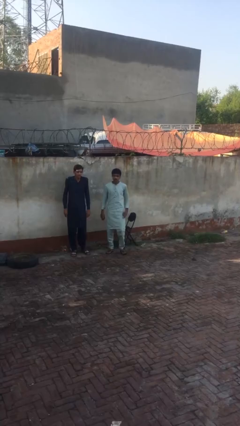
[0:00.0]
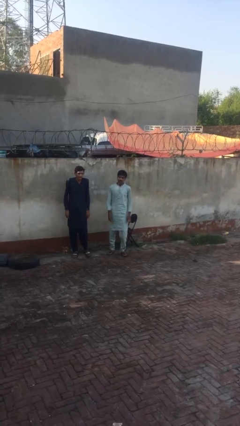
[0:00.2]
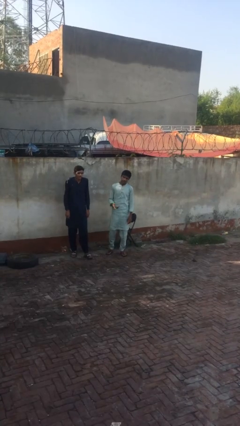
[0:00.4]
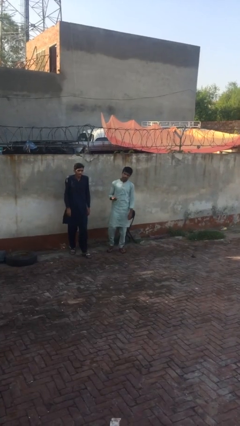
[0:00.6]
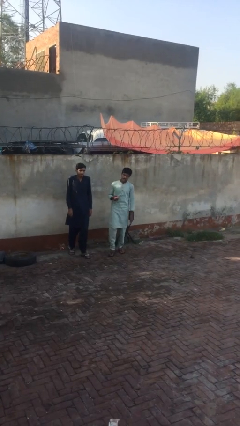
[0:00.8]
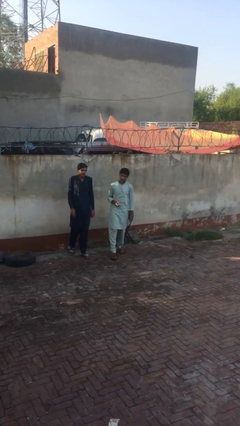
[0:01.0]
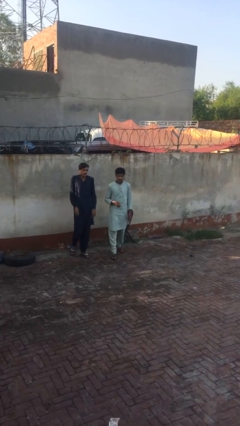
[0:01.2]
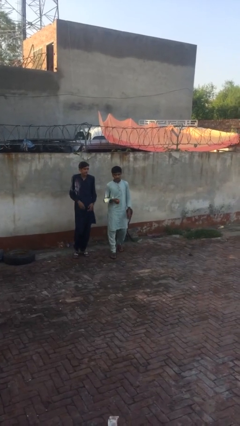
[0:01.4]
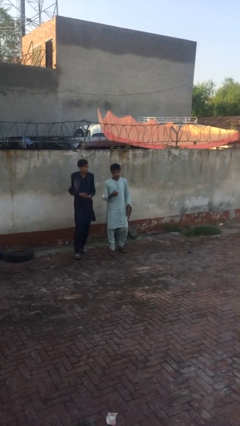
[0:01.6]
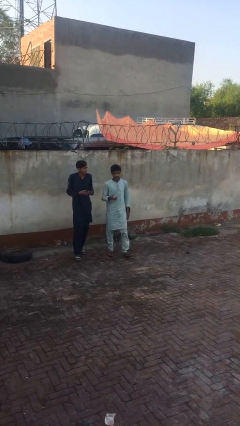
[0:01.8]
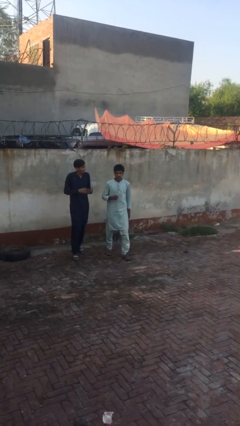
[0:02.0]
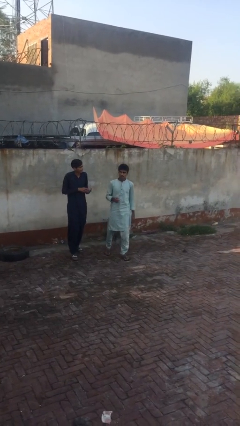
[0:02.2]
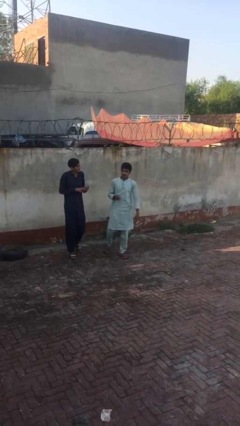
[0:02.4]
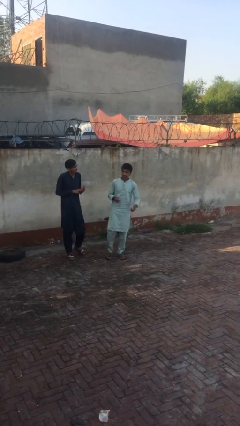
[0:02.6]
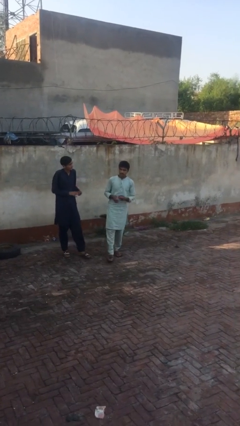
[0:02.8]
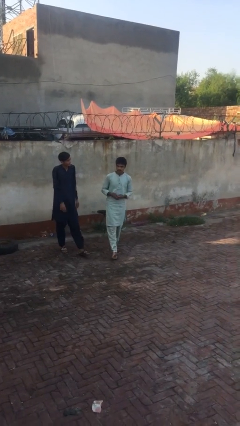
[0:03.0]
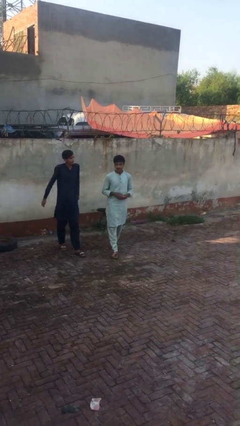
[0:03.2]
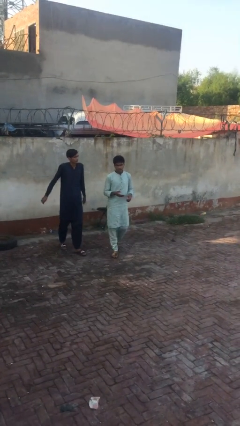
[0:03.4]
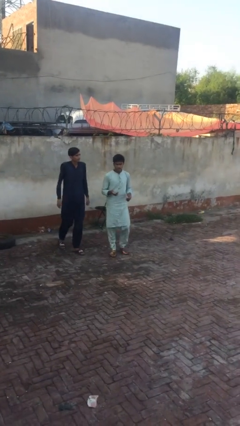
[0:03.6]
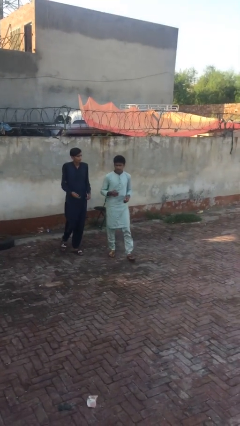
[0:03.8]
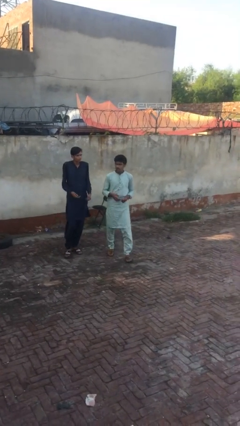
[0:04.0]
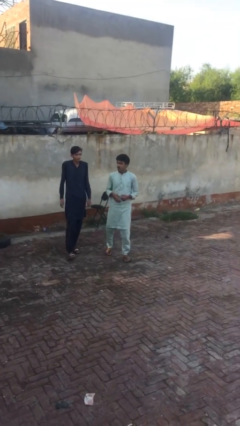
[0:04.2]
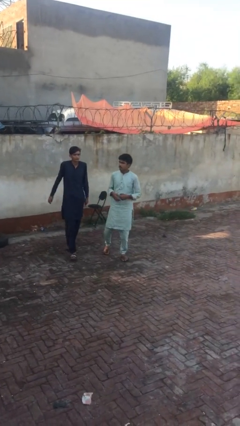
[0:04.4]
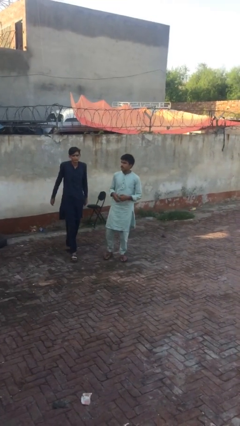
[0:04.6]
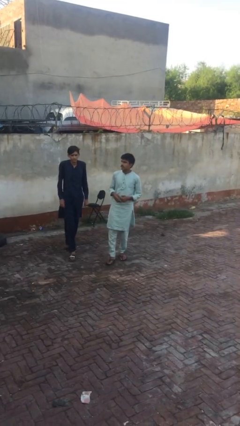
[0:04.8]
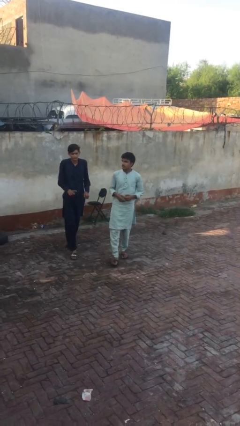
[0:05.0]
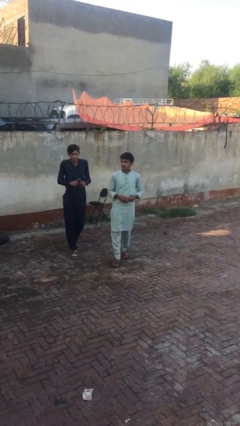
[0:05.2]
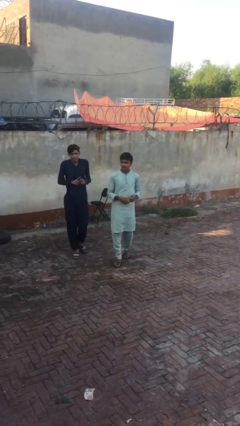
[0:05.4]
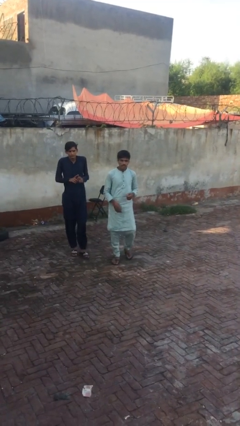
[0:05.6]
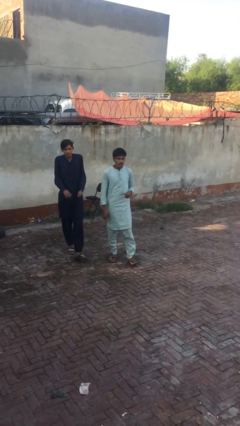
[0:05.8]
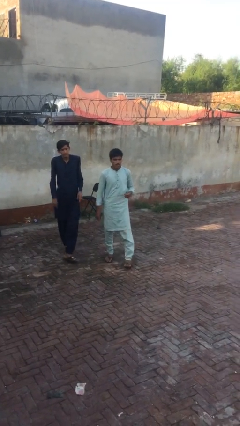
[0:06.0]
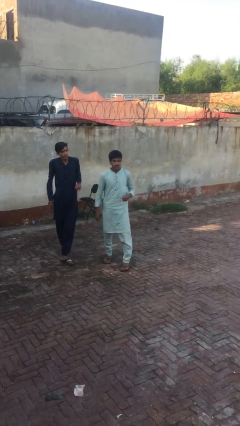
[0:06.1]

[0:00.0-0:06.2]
person talks to person

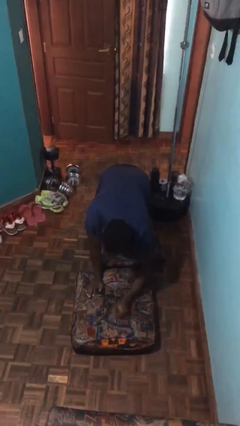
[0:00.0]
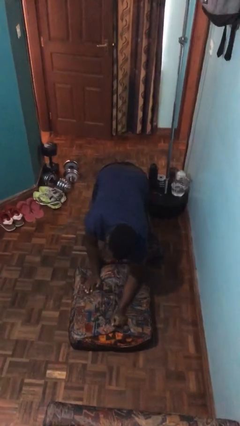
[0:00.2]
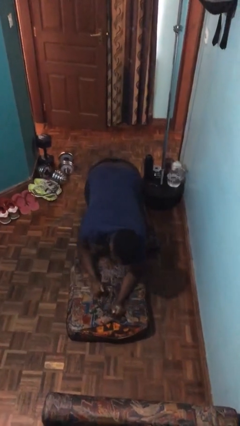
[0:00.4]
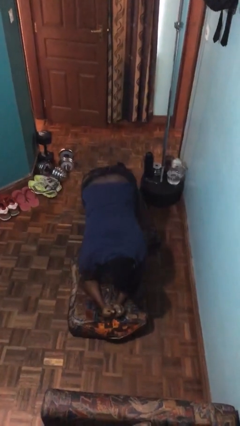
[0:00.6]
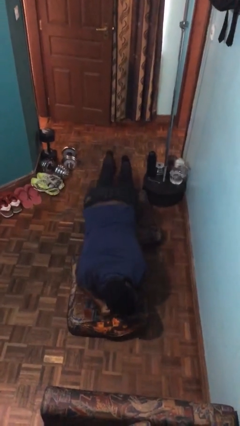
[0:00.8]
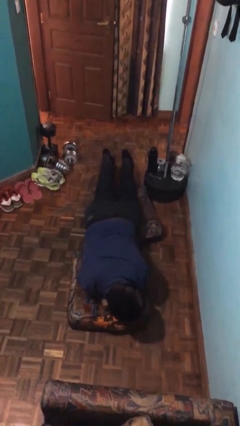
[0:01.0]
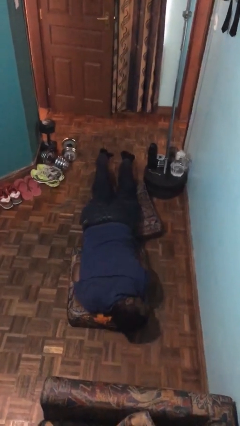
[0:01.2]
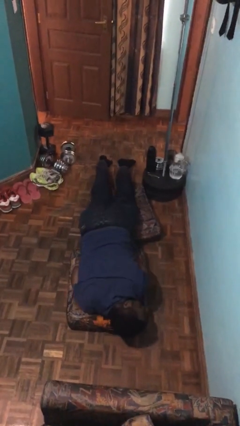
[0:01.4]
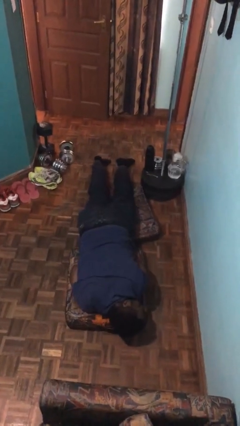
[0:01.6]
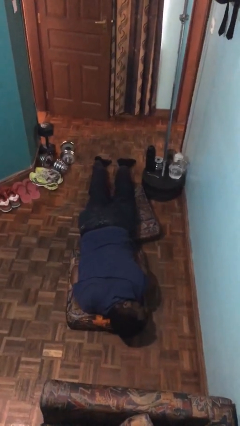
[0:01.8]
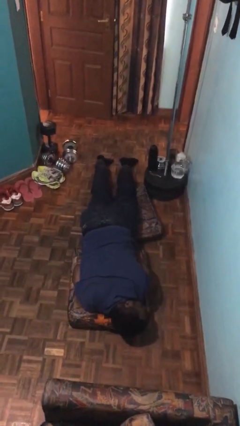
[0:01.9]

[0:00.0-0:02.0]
person lies down on floor

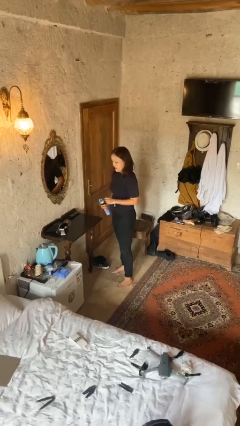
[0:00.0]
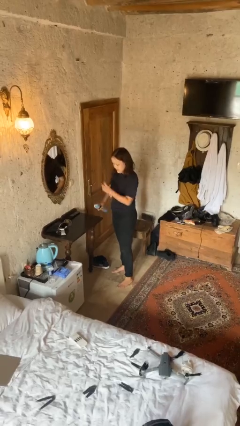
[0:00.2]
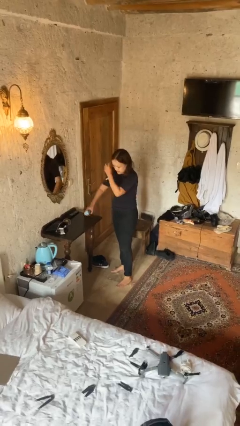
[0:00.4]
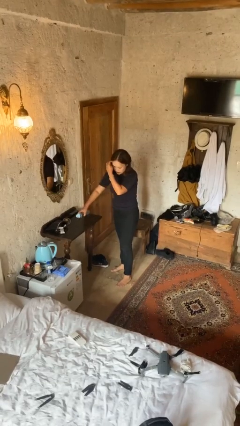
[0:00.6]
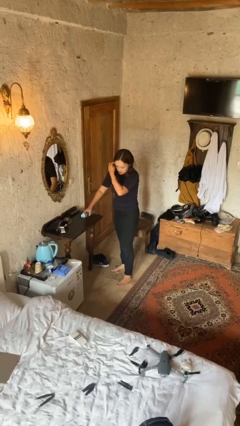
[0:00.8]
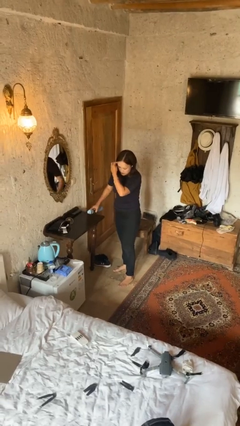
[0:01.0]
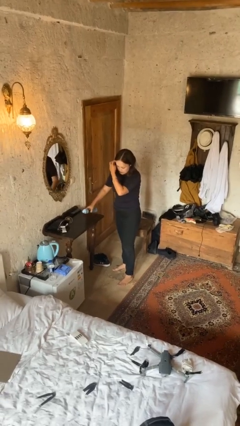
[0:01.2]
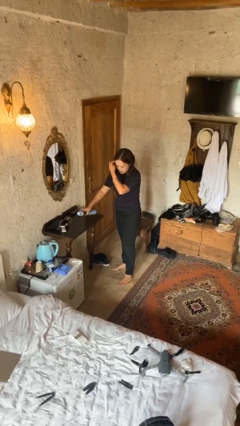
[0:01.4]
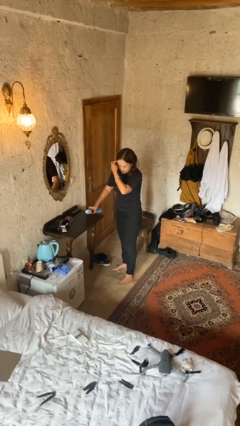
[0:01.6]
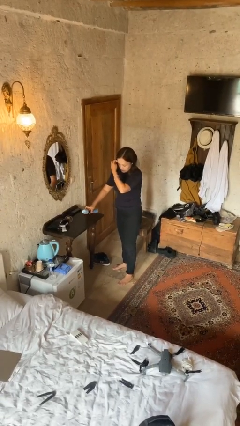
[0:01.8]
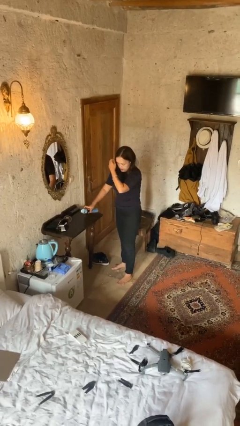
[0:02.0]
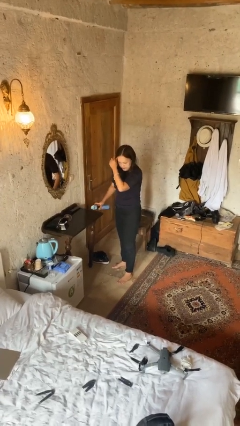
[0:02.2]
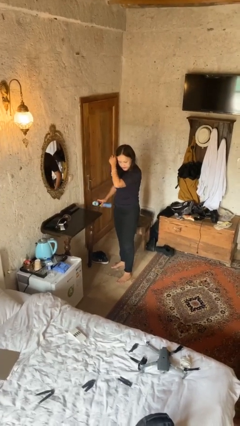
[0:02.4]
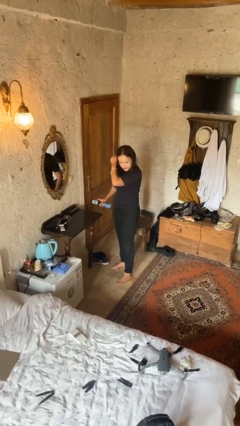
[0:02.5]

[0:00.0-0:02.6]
person sprays from bottle

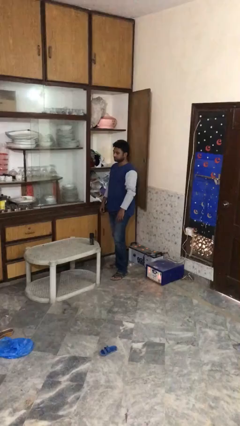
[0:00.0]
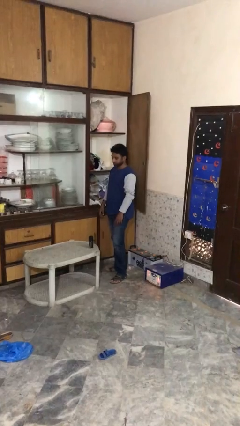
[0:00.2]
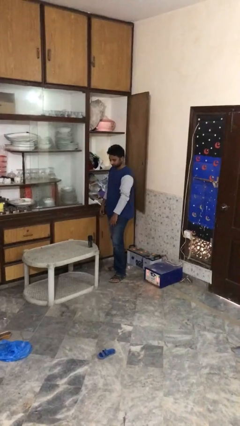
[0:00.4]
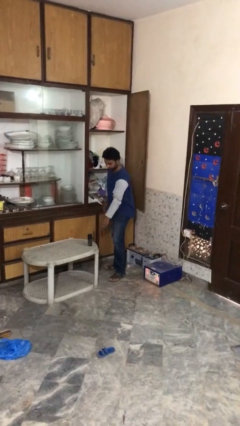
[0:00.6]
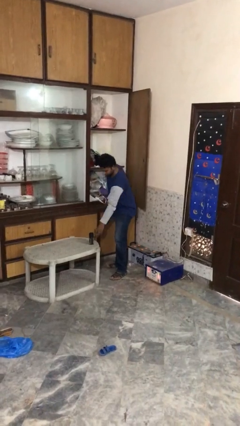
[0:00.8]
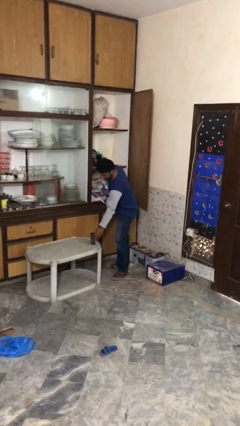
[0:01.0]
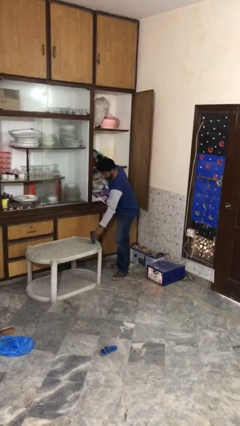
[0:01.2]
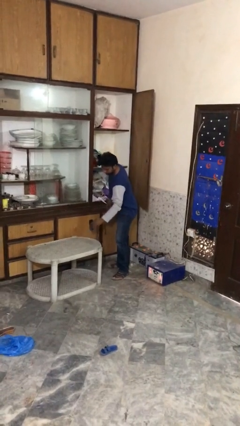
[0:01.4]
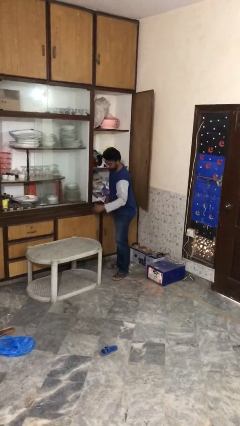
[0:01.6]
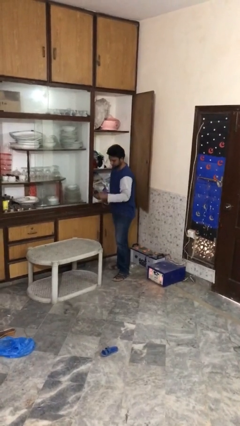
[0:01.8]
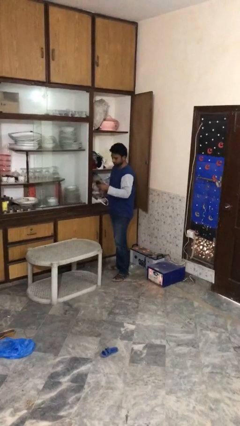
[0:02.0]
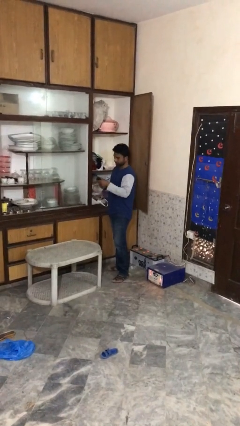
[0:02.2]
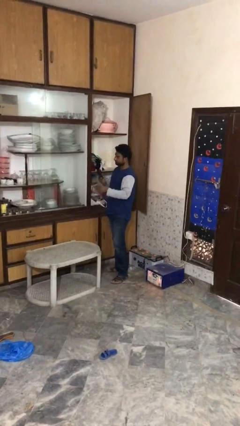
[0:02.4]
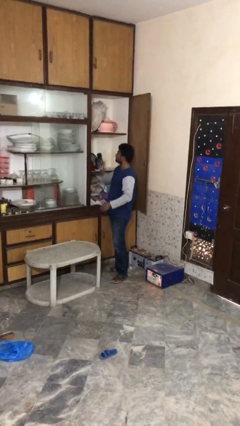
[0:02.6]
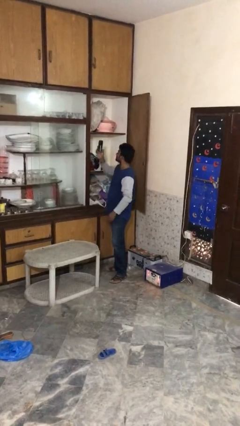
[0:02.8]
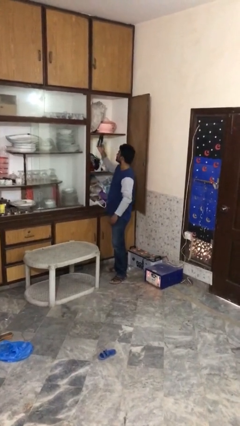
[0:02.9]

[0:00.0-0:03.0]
person picks up object from table

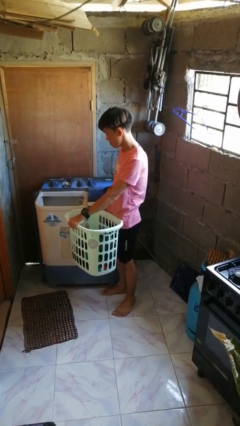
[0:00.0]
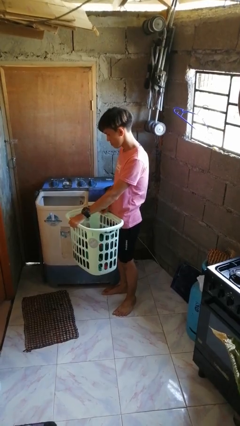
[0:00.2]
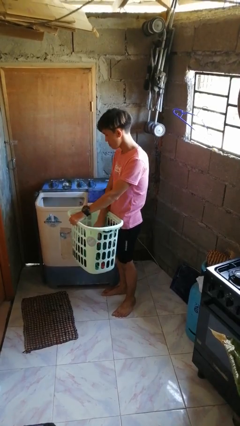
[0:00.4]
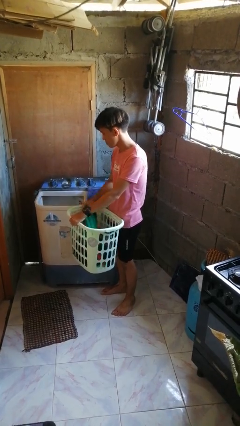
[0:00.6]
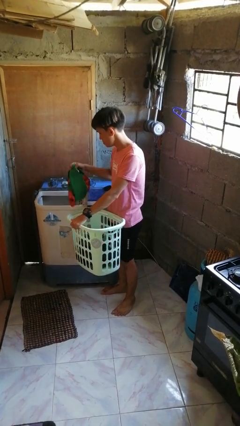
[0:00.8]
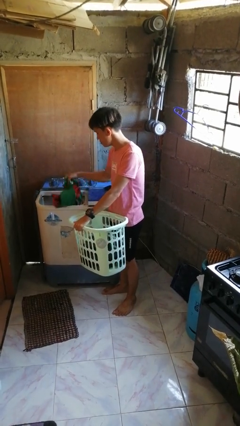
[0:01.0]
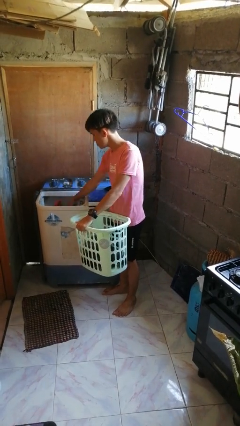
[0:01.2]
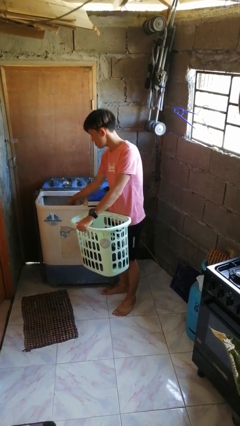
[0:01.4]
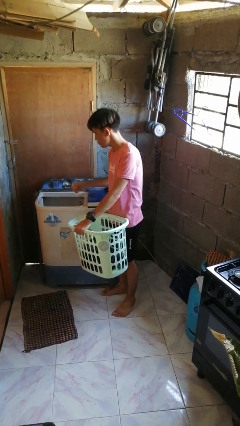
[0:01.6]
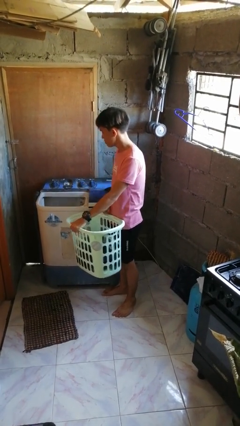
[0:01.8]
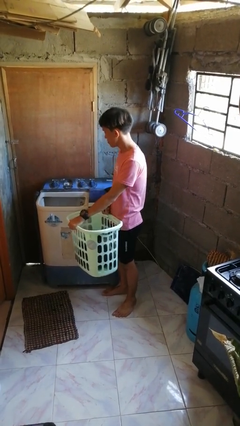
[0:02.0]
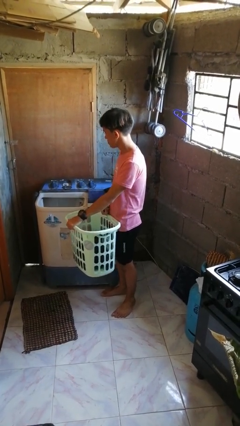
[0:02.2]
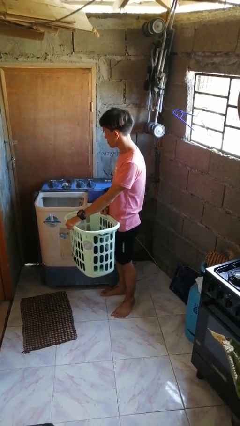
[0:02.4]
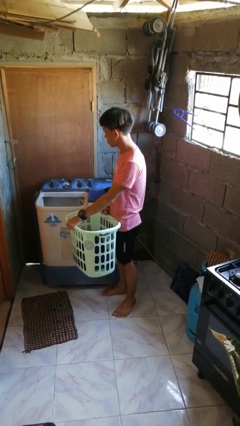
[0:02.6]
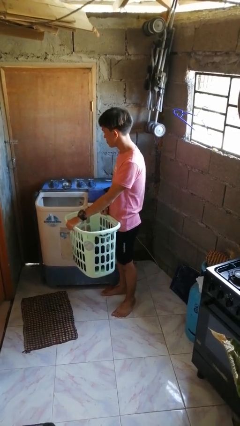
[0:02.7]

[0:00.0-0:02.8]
person loads clotheswasher

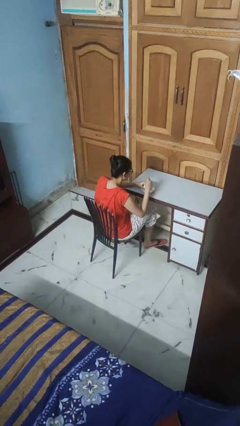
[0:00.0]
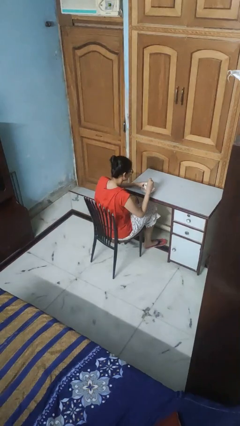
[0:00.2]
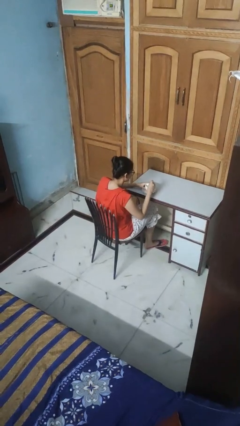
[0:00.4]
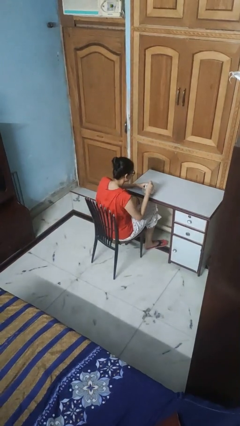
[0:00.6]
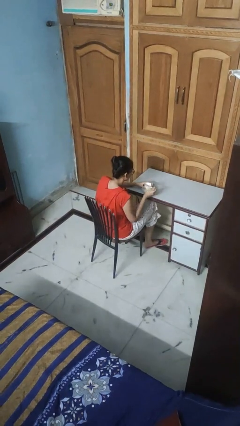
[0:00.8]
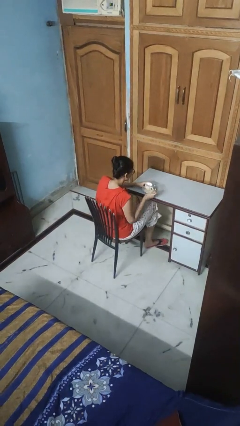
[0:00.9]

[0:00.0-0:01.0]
person stirs mug
